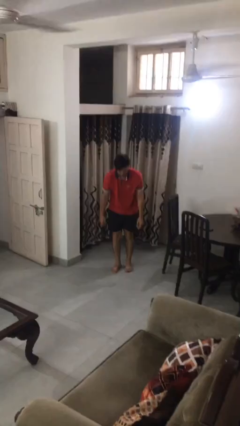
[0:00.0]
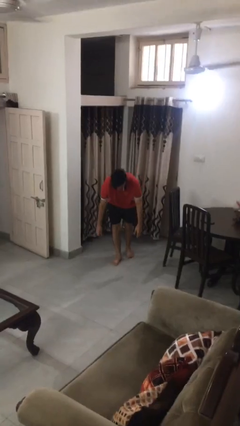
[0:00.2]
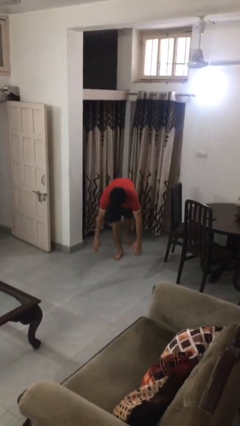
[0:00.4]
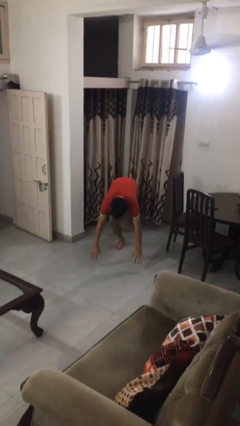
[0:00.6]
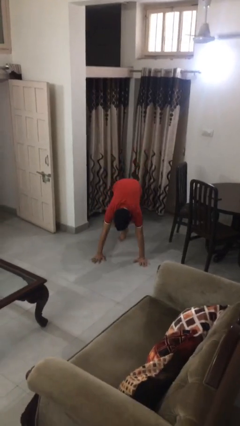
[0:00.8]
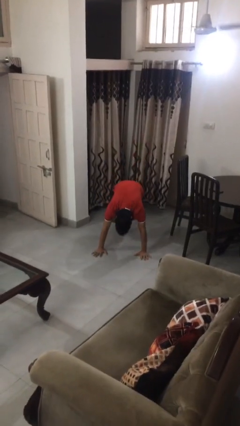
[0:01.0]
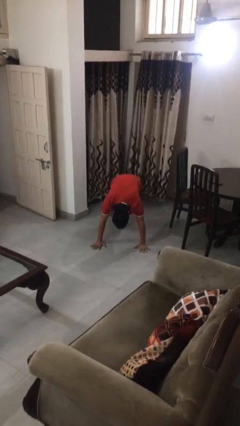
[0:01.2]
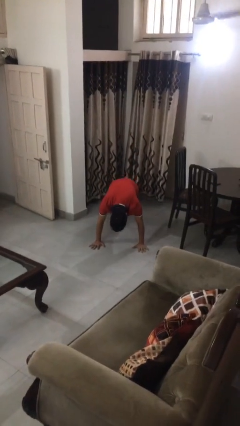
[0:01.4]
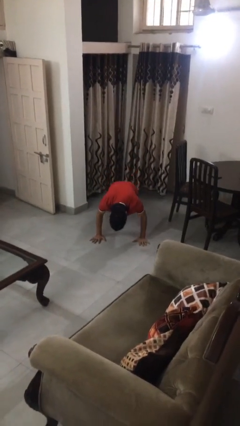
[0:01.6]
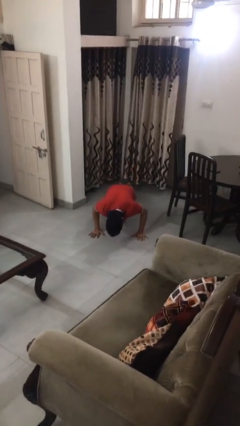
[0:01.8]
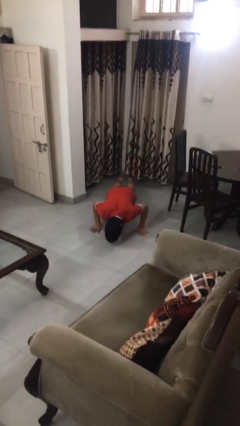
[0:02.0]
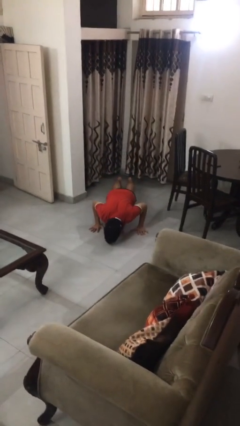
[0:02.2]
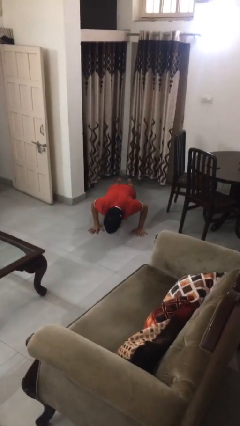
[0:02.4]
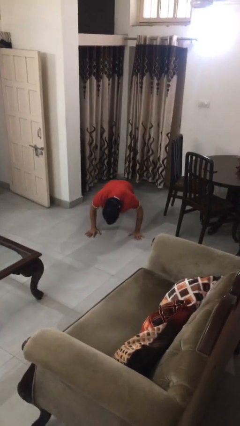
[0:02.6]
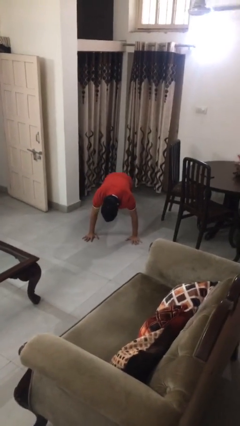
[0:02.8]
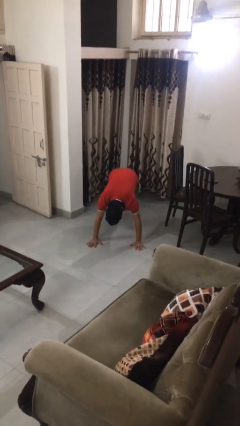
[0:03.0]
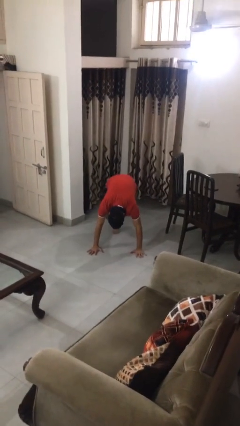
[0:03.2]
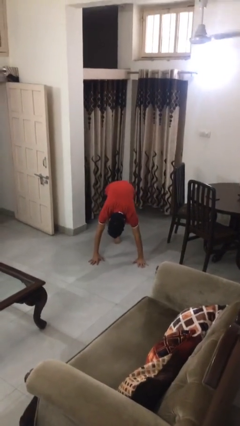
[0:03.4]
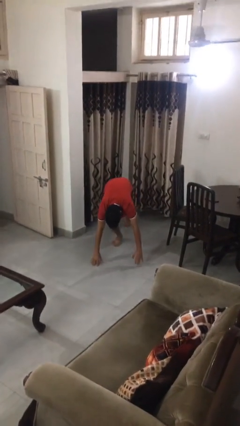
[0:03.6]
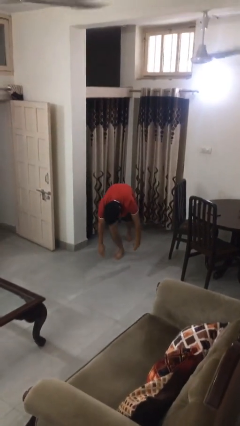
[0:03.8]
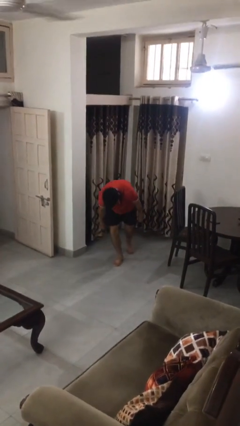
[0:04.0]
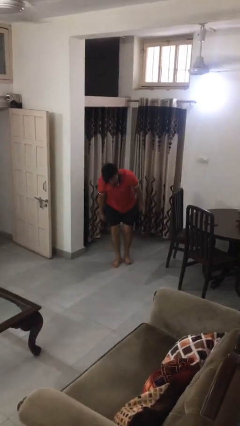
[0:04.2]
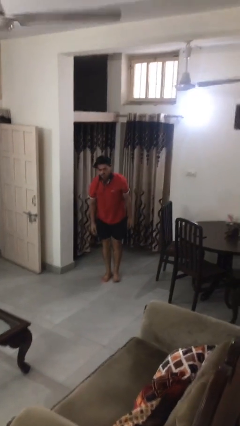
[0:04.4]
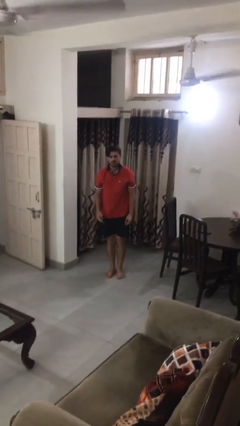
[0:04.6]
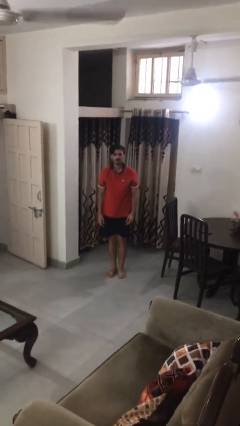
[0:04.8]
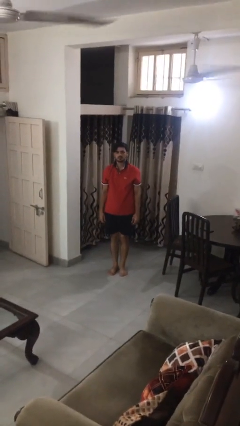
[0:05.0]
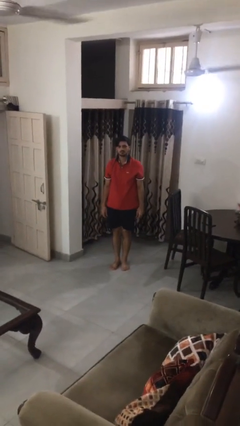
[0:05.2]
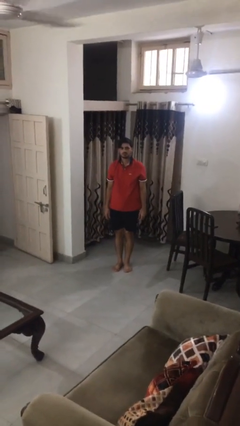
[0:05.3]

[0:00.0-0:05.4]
person exercises with pushup

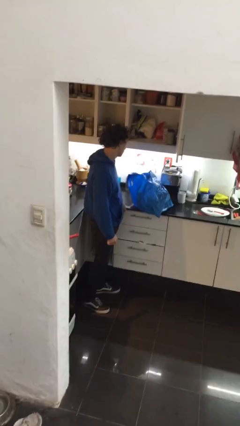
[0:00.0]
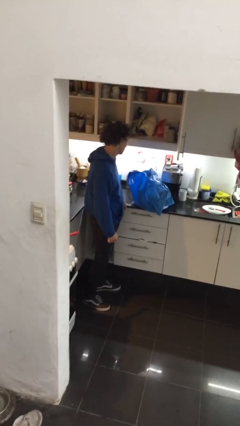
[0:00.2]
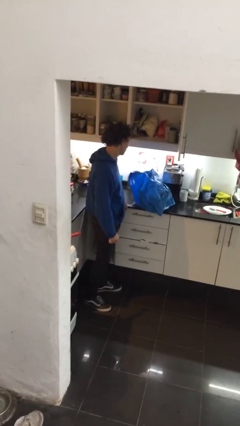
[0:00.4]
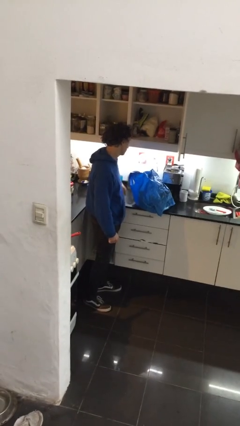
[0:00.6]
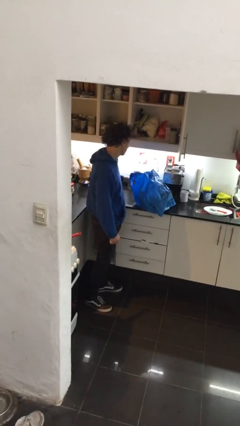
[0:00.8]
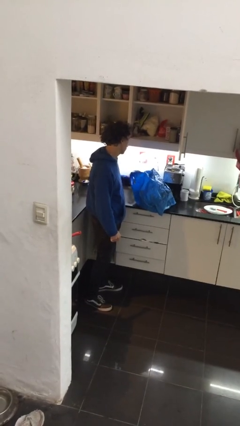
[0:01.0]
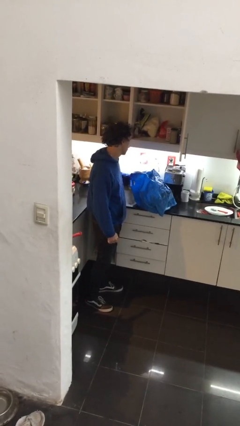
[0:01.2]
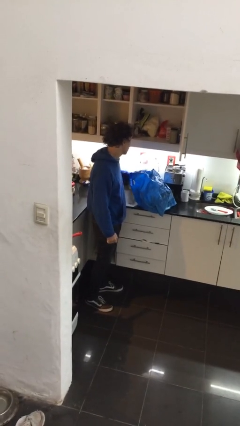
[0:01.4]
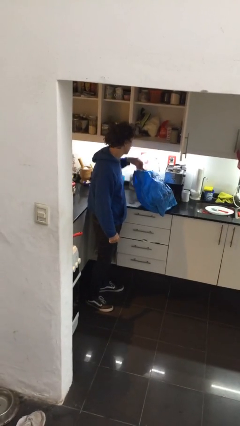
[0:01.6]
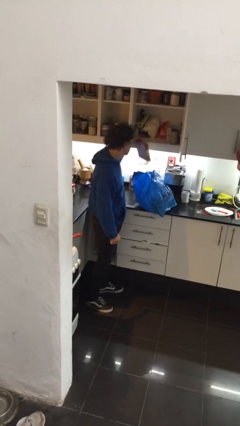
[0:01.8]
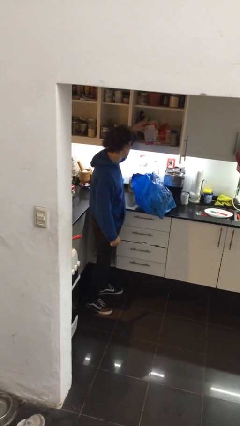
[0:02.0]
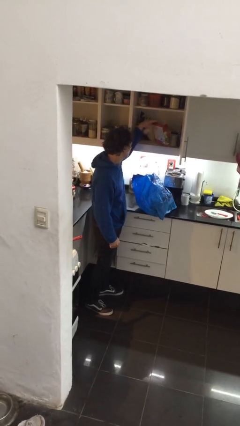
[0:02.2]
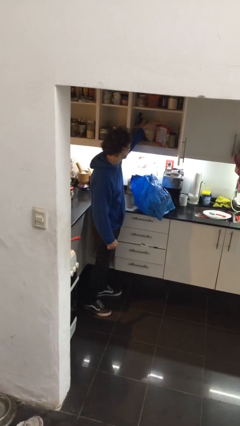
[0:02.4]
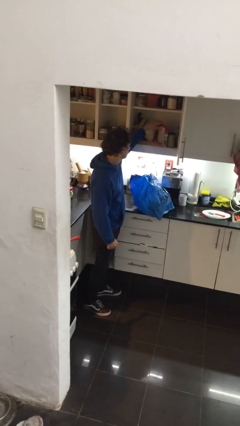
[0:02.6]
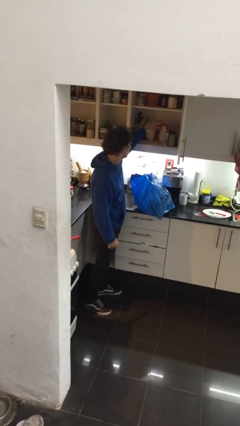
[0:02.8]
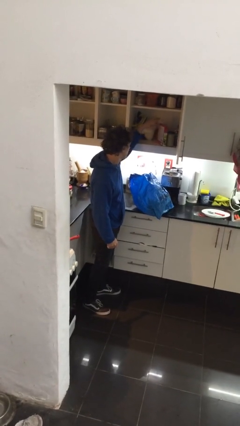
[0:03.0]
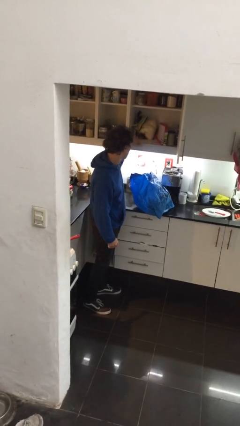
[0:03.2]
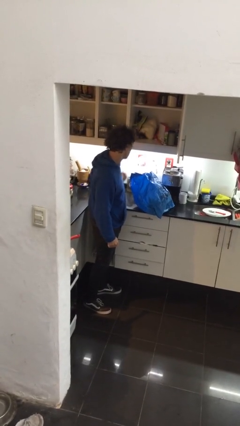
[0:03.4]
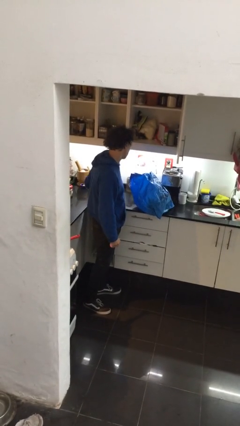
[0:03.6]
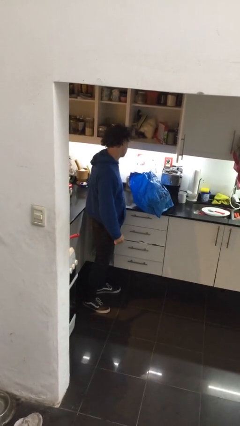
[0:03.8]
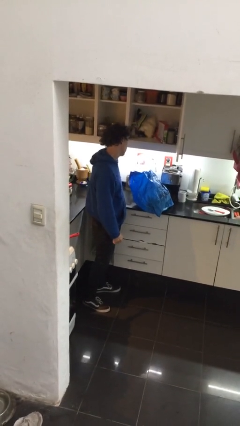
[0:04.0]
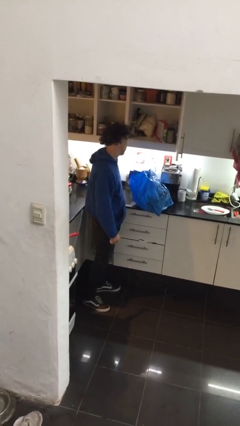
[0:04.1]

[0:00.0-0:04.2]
person loads groceries into cabinet

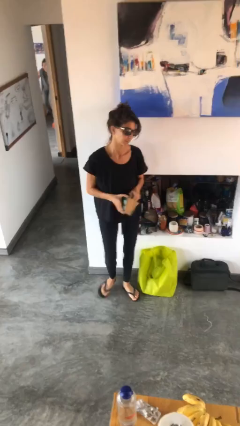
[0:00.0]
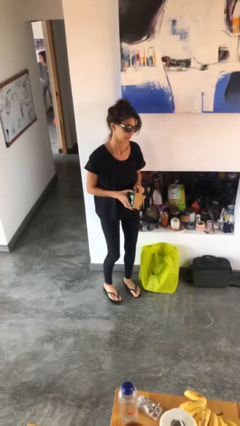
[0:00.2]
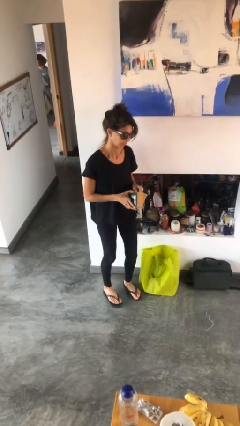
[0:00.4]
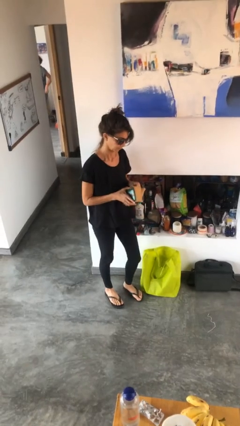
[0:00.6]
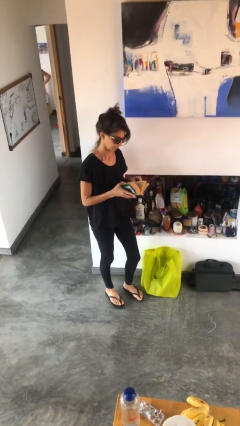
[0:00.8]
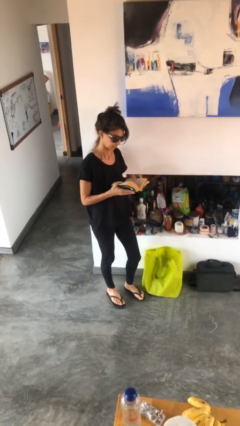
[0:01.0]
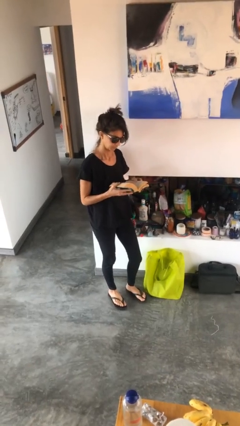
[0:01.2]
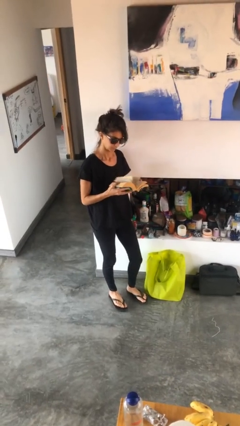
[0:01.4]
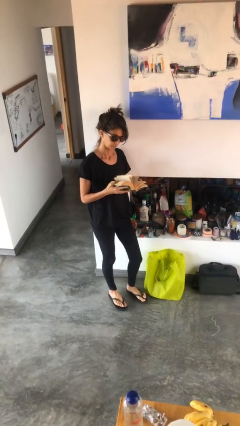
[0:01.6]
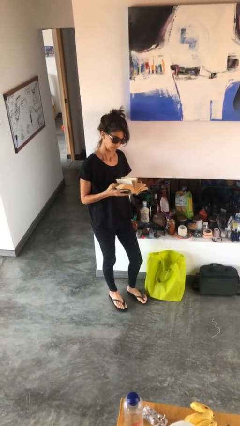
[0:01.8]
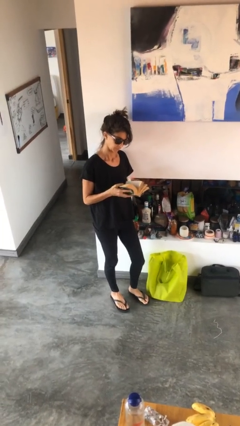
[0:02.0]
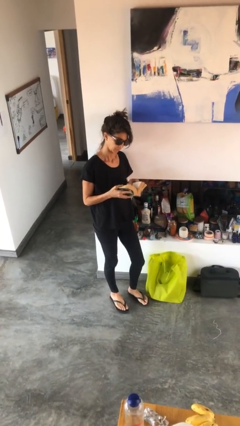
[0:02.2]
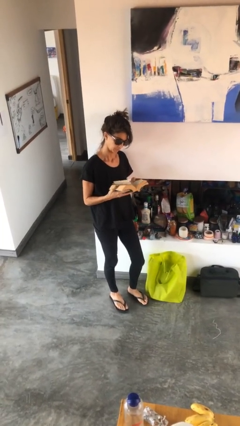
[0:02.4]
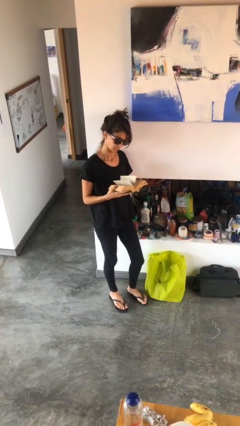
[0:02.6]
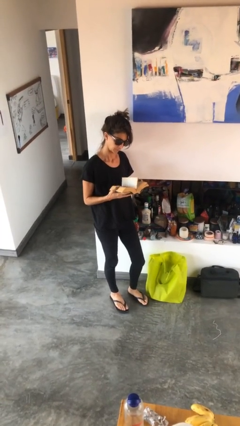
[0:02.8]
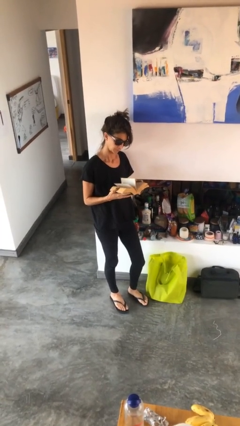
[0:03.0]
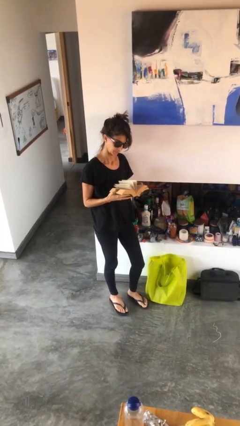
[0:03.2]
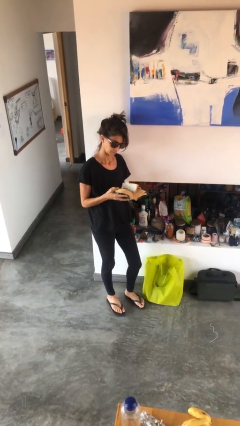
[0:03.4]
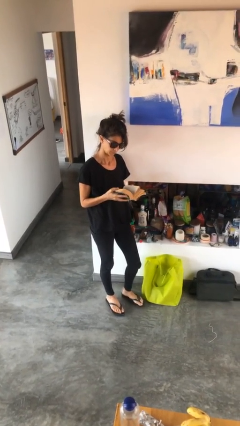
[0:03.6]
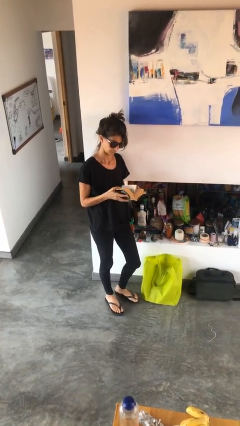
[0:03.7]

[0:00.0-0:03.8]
person reads book

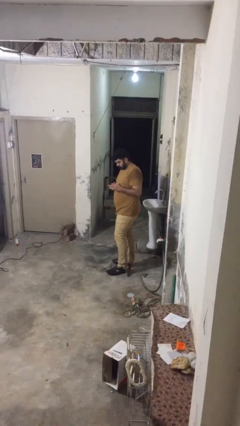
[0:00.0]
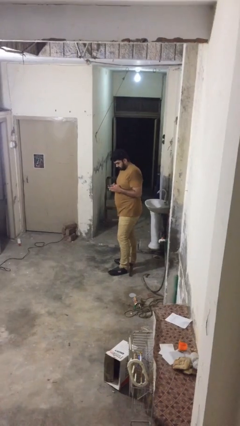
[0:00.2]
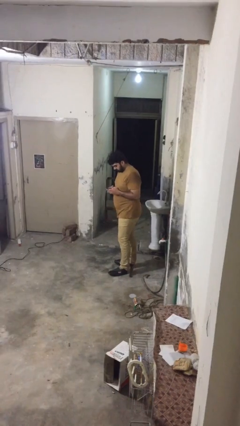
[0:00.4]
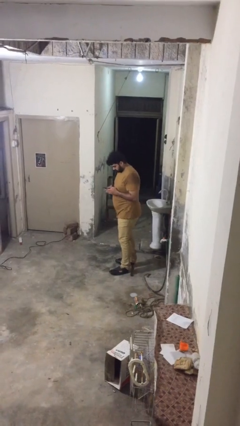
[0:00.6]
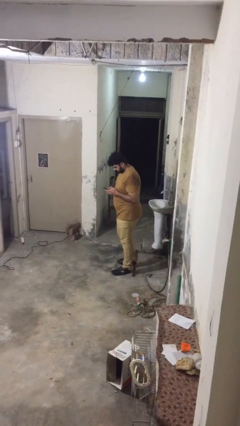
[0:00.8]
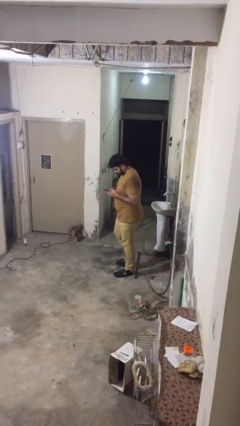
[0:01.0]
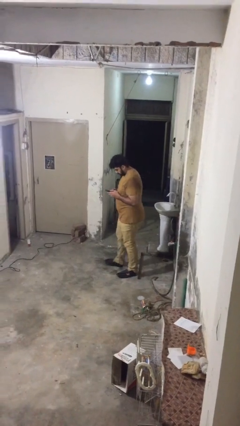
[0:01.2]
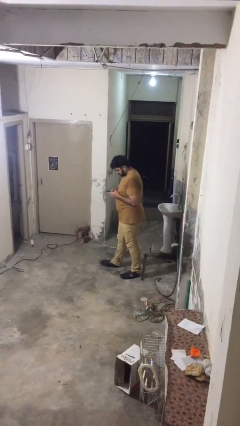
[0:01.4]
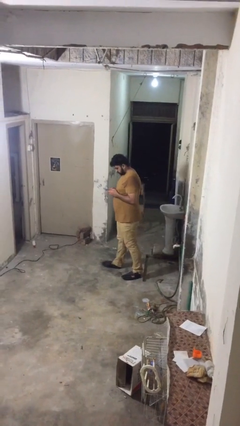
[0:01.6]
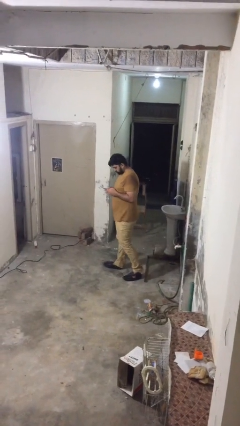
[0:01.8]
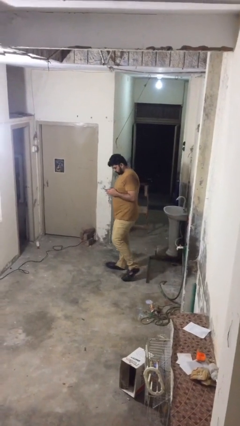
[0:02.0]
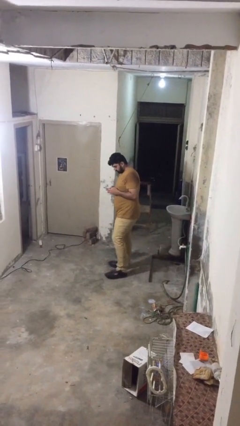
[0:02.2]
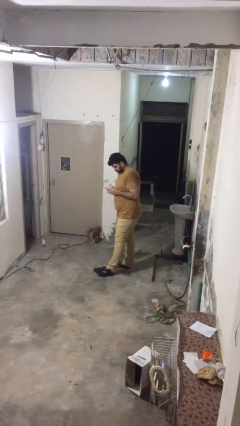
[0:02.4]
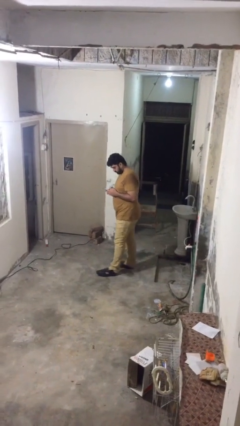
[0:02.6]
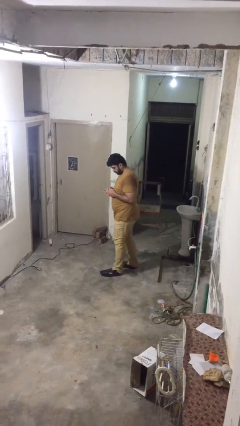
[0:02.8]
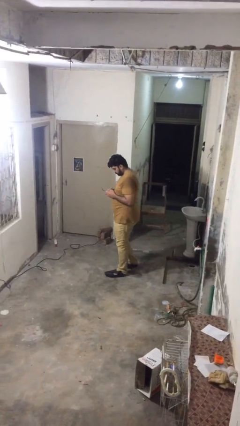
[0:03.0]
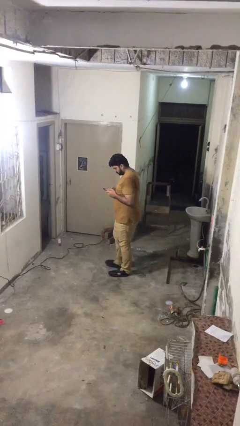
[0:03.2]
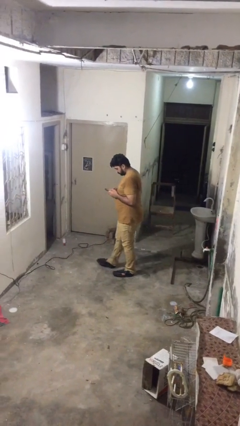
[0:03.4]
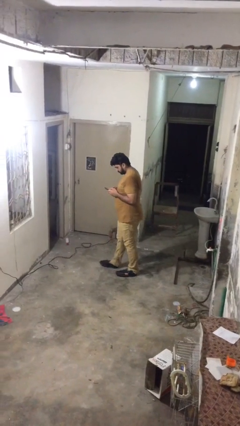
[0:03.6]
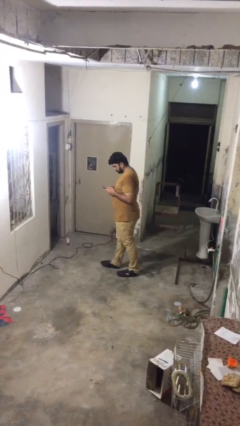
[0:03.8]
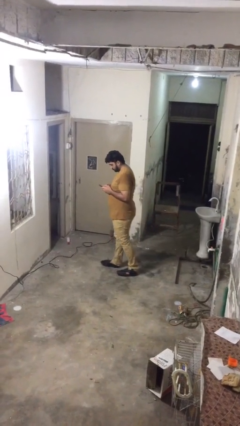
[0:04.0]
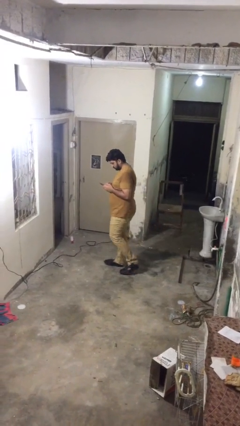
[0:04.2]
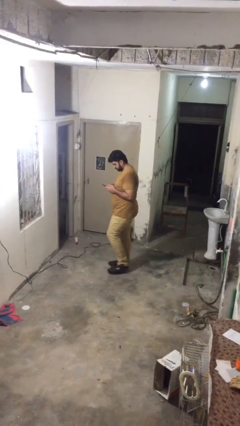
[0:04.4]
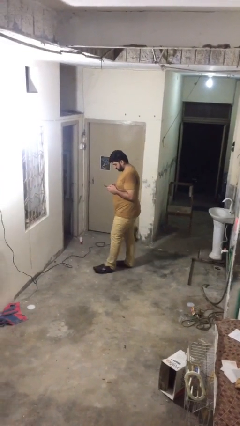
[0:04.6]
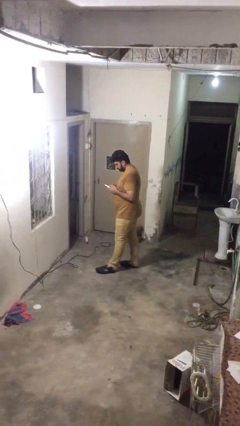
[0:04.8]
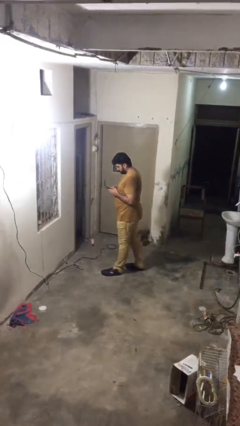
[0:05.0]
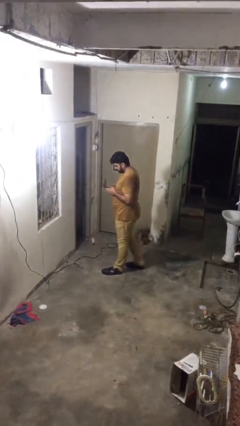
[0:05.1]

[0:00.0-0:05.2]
person texts on phone
